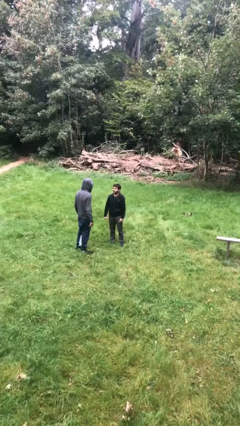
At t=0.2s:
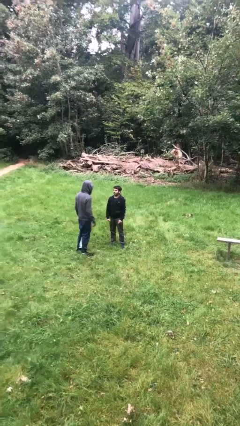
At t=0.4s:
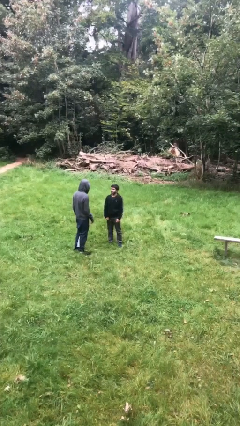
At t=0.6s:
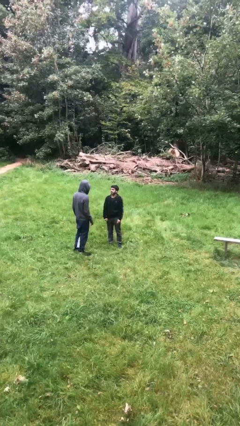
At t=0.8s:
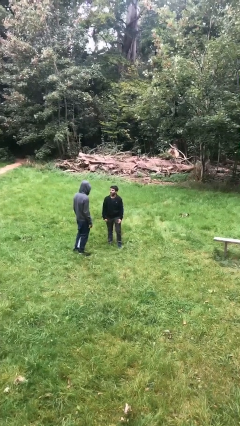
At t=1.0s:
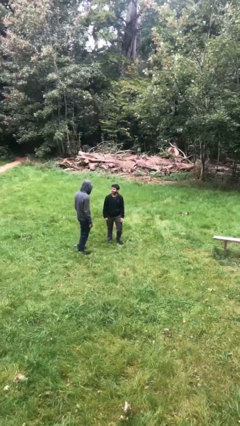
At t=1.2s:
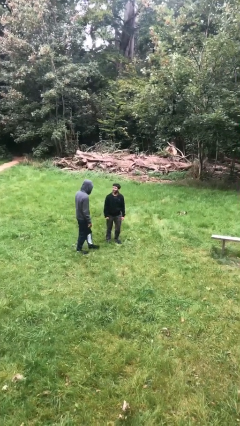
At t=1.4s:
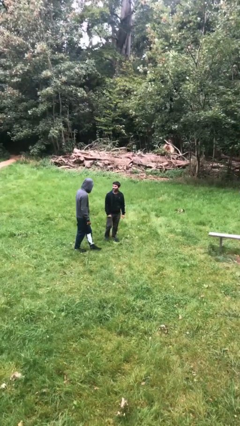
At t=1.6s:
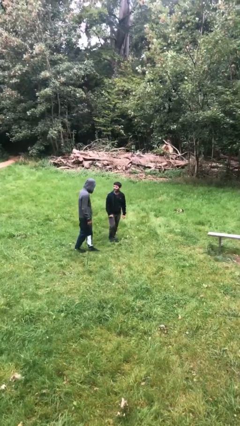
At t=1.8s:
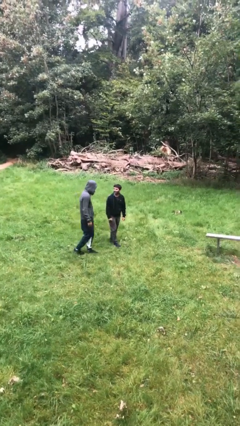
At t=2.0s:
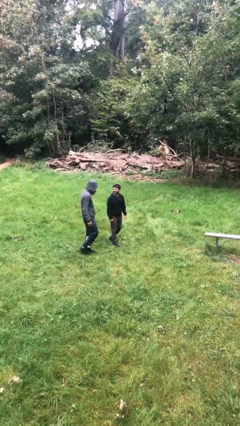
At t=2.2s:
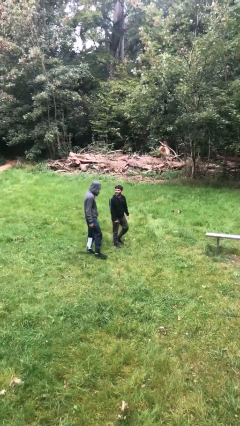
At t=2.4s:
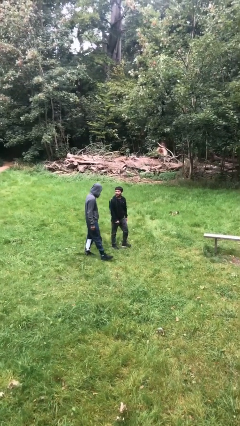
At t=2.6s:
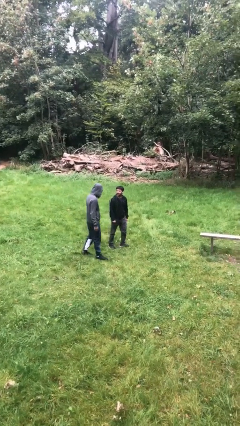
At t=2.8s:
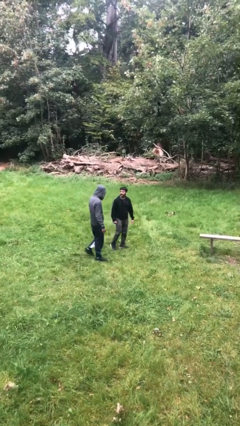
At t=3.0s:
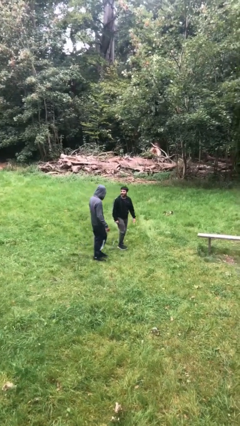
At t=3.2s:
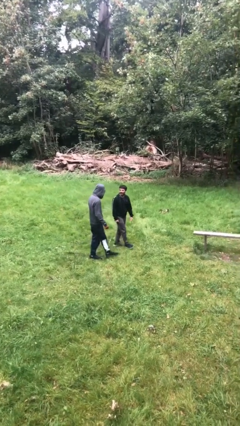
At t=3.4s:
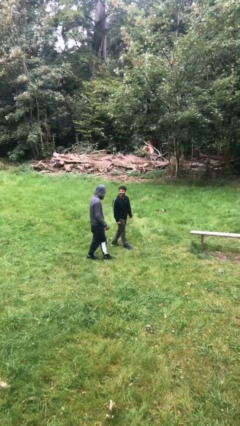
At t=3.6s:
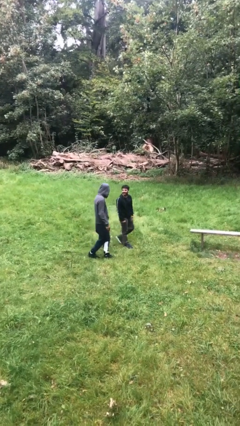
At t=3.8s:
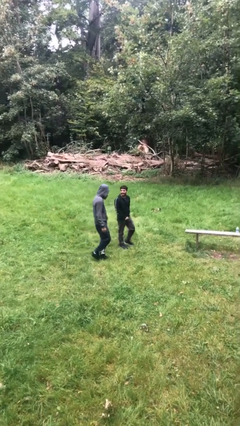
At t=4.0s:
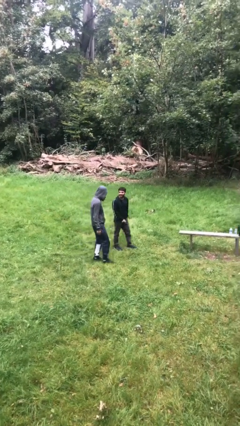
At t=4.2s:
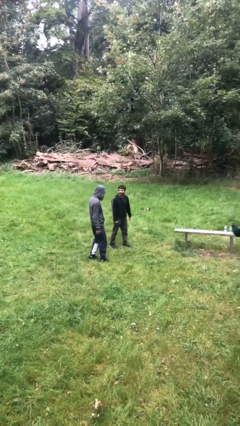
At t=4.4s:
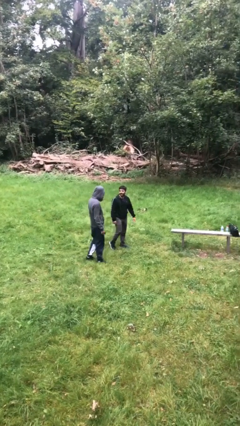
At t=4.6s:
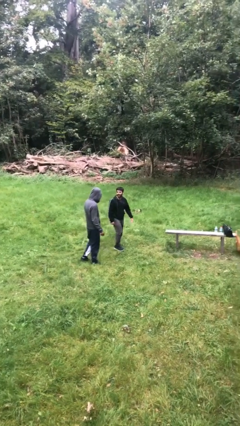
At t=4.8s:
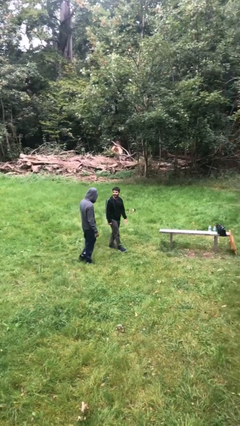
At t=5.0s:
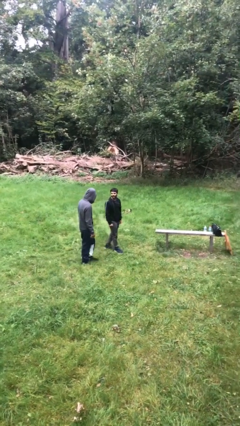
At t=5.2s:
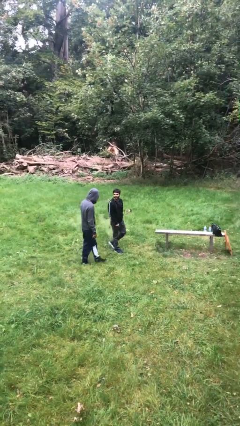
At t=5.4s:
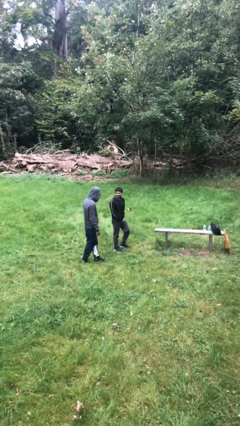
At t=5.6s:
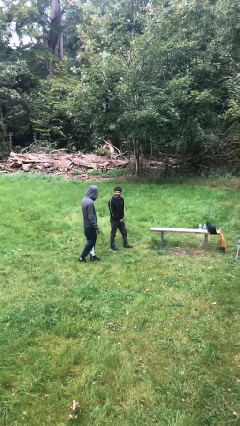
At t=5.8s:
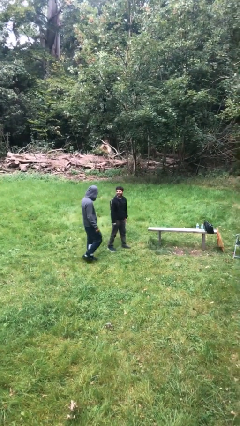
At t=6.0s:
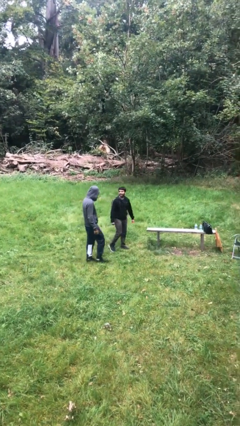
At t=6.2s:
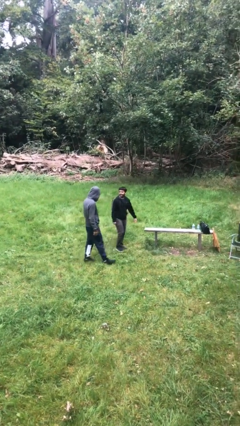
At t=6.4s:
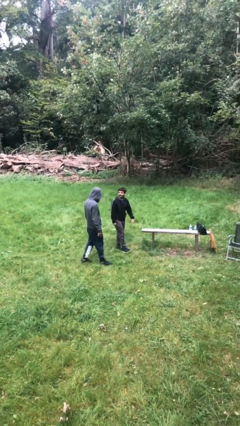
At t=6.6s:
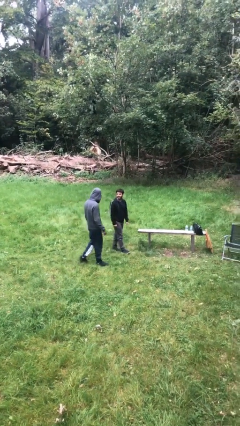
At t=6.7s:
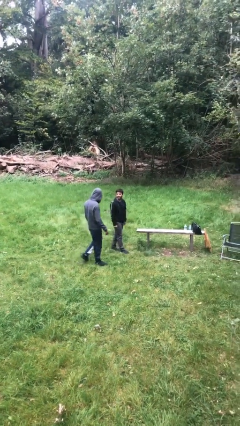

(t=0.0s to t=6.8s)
person talks to person

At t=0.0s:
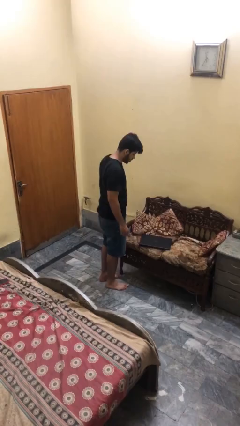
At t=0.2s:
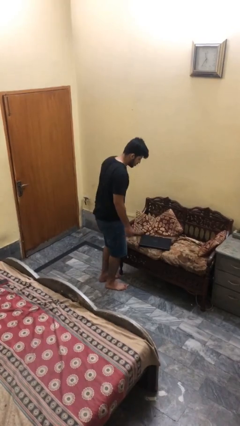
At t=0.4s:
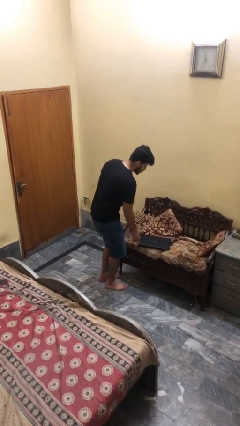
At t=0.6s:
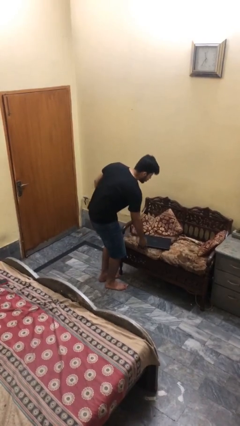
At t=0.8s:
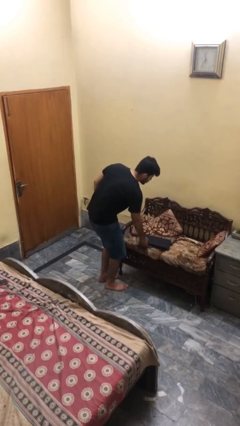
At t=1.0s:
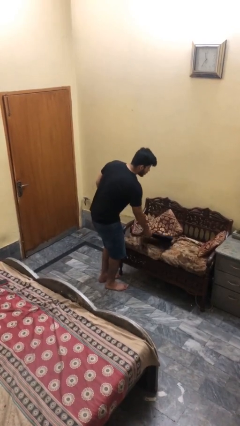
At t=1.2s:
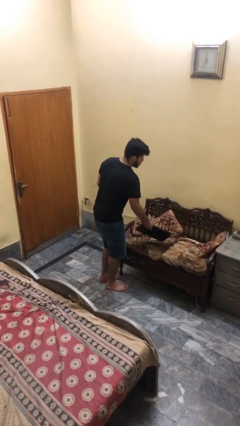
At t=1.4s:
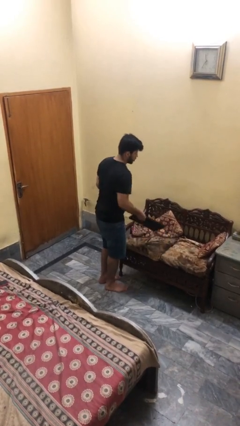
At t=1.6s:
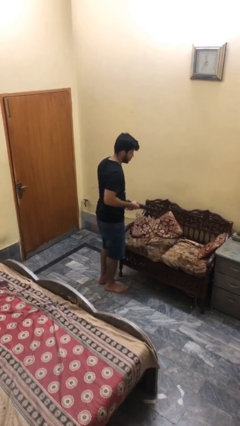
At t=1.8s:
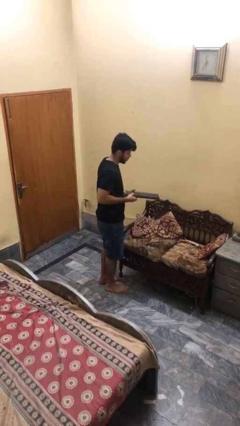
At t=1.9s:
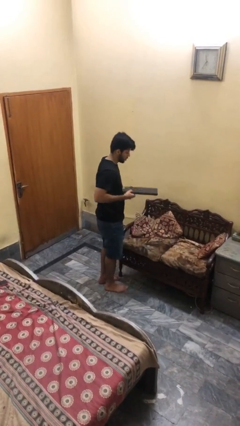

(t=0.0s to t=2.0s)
person picks up object from couch

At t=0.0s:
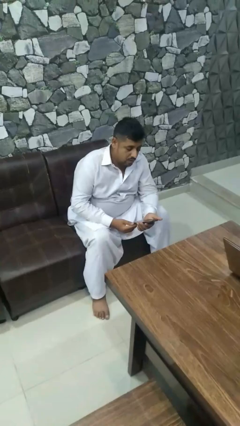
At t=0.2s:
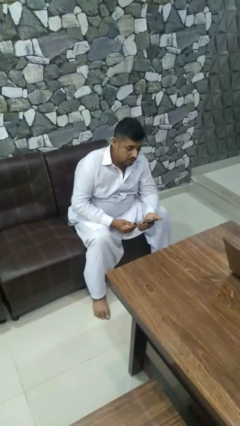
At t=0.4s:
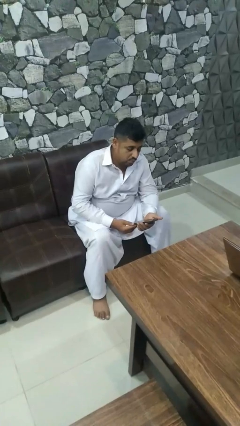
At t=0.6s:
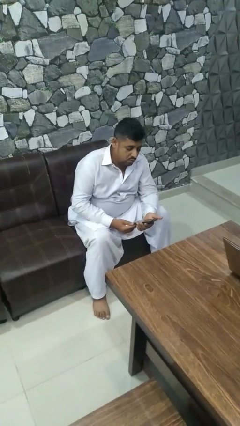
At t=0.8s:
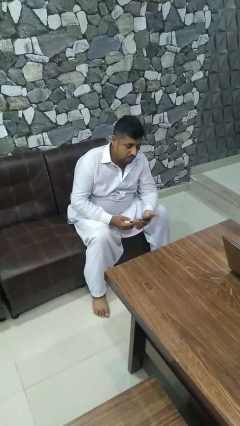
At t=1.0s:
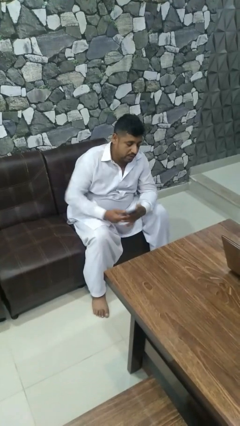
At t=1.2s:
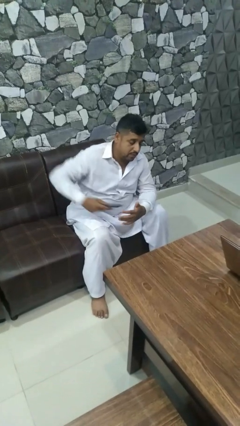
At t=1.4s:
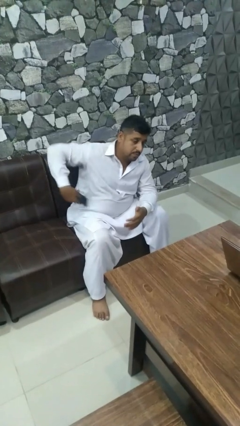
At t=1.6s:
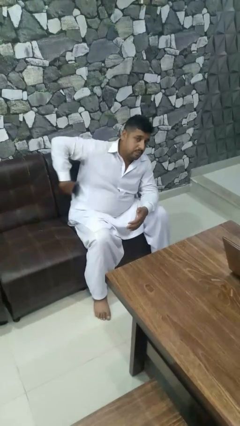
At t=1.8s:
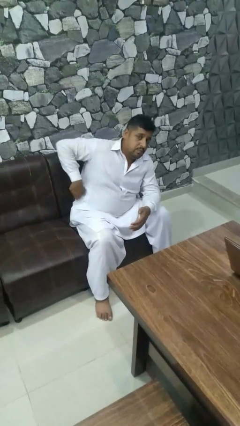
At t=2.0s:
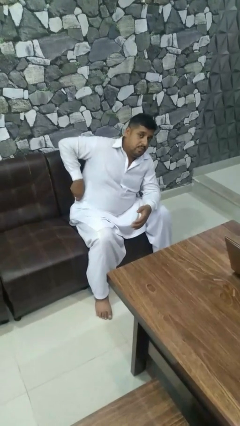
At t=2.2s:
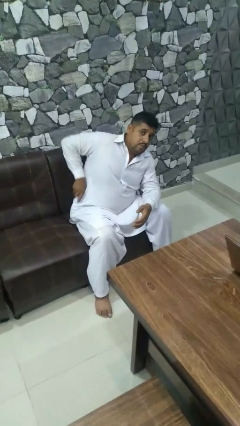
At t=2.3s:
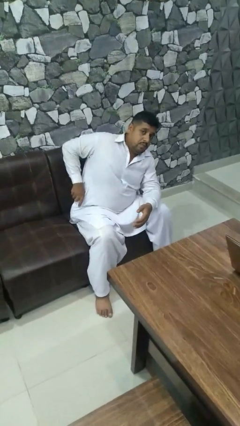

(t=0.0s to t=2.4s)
person puts phone into pocket

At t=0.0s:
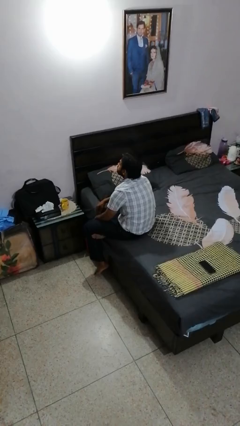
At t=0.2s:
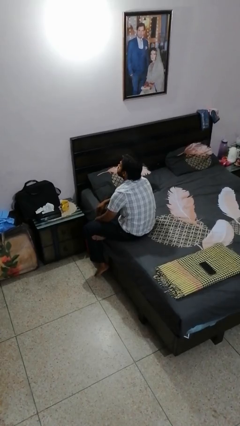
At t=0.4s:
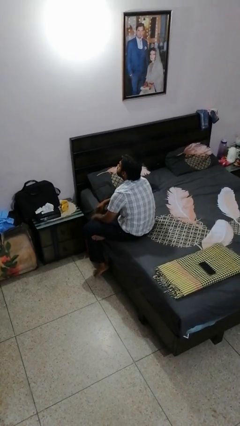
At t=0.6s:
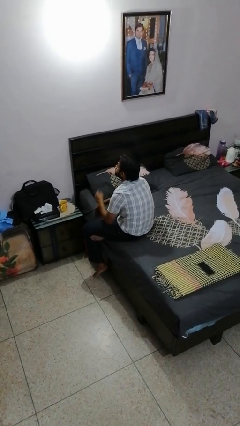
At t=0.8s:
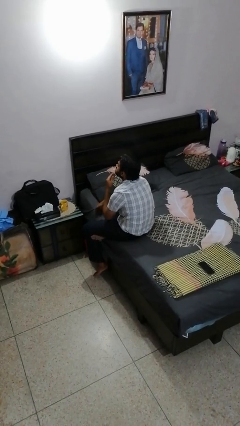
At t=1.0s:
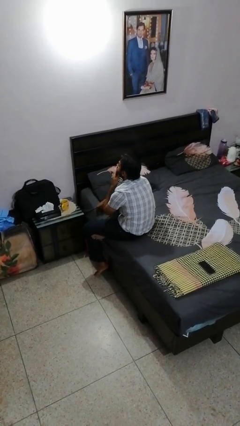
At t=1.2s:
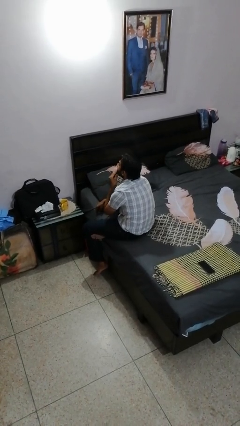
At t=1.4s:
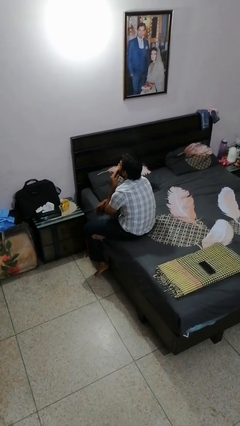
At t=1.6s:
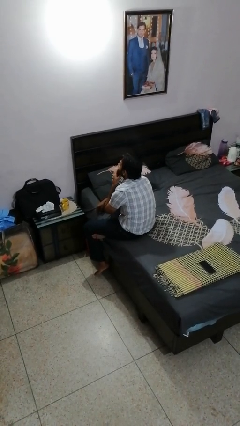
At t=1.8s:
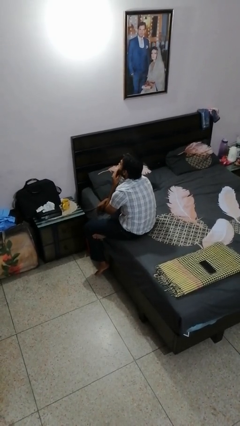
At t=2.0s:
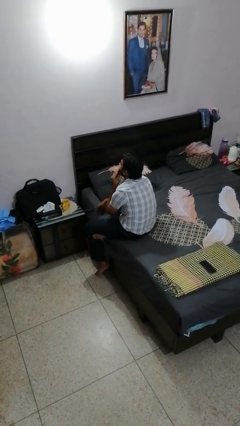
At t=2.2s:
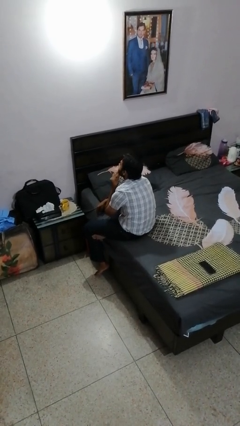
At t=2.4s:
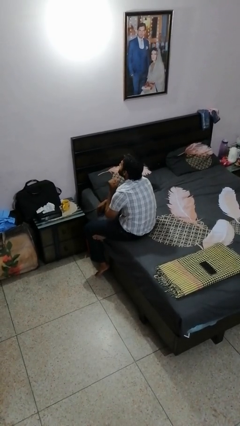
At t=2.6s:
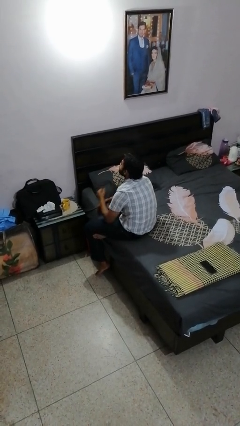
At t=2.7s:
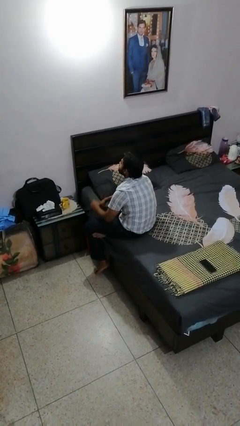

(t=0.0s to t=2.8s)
person strokes chin

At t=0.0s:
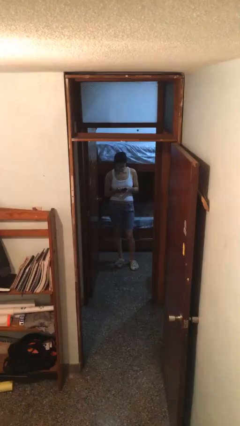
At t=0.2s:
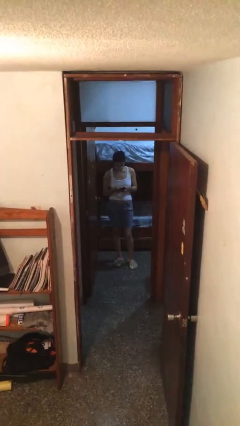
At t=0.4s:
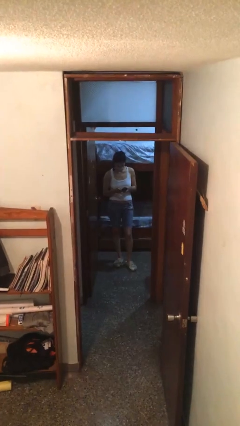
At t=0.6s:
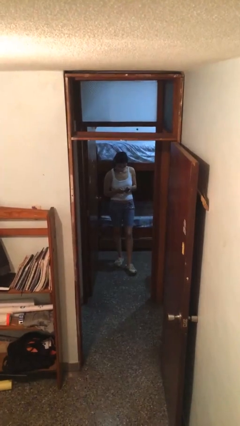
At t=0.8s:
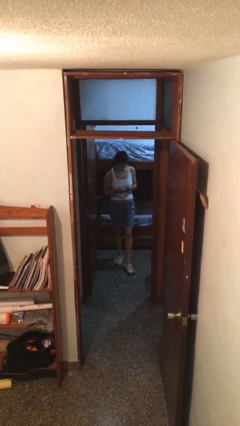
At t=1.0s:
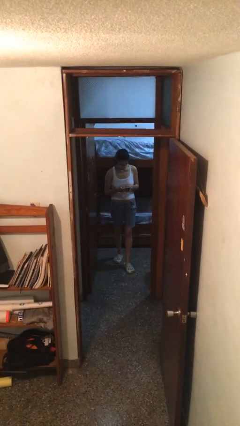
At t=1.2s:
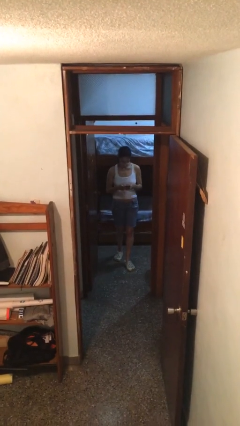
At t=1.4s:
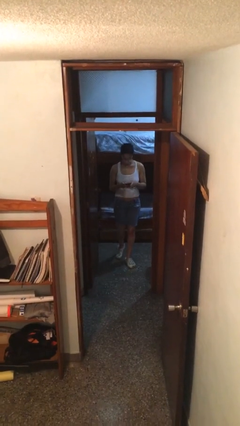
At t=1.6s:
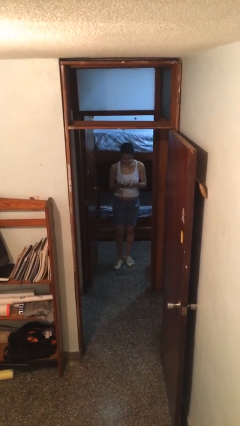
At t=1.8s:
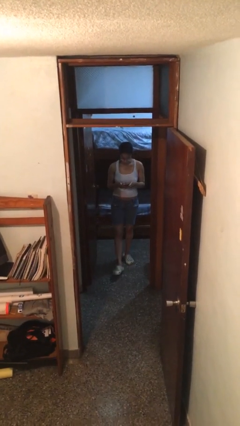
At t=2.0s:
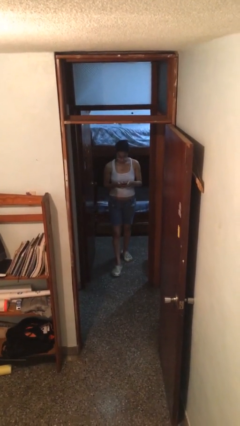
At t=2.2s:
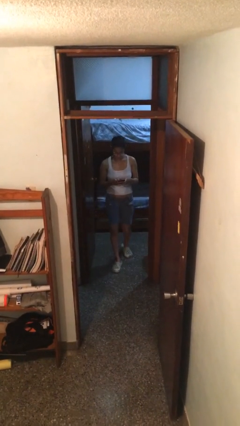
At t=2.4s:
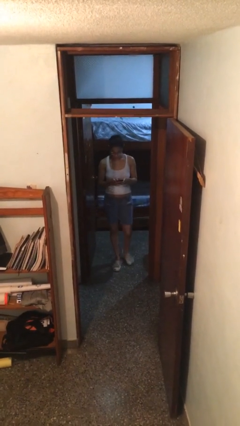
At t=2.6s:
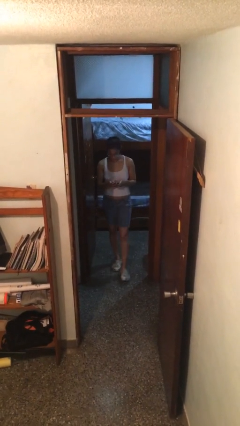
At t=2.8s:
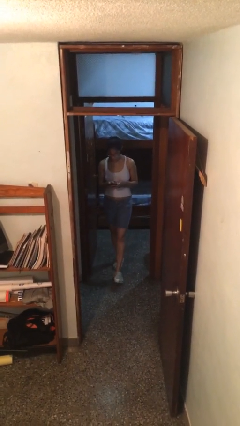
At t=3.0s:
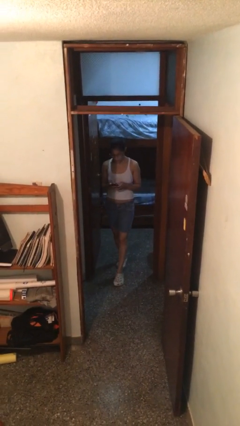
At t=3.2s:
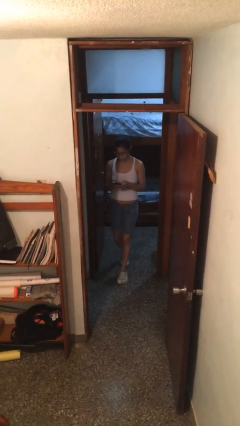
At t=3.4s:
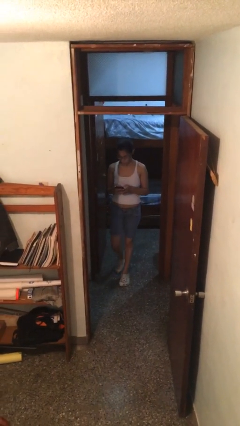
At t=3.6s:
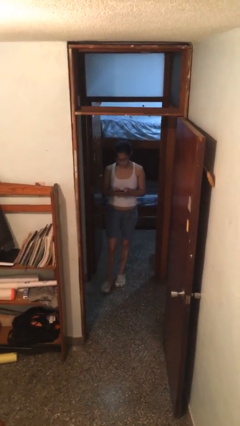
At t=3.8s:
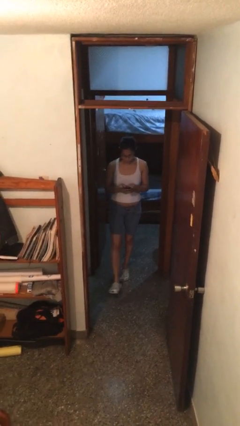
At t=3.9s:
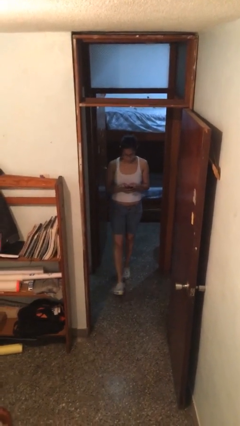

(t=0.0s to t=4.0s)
person texts on phone
